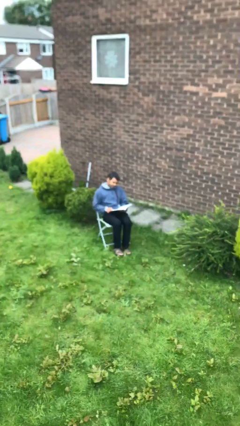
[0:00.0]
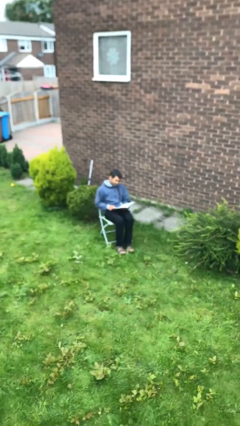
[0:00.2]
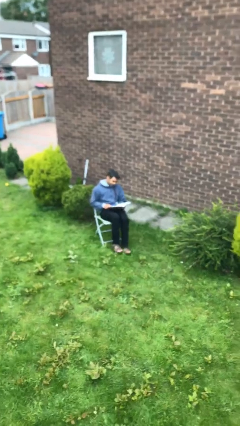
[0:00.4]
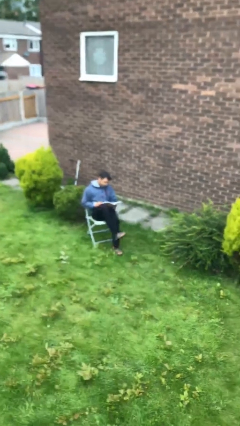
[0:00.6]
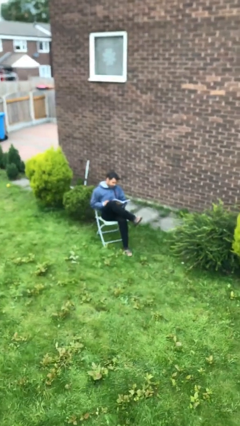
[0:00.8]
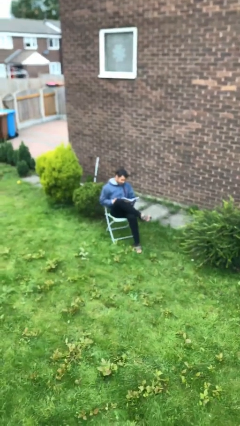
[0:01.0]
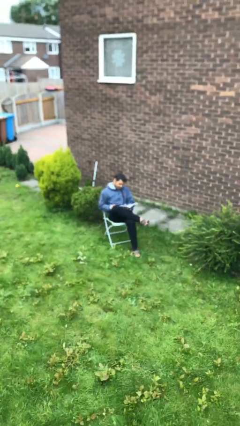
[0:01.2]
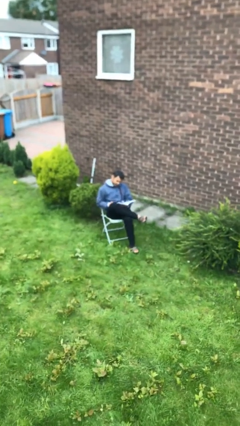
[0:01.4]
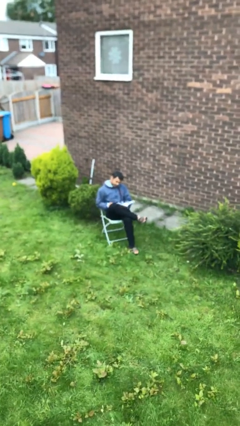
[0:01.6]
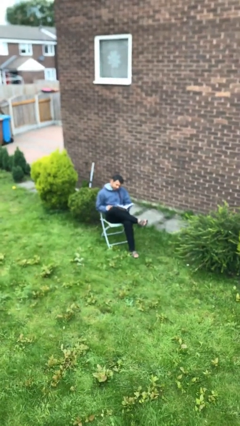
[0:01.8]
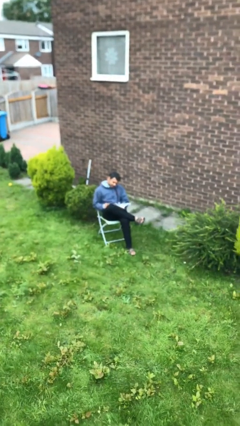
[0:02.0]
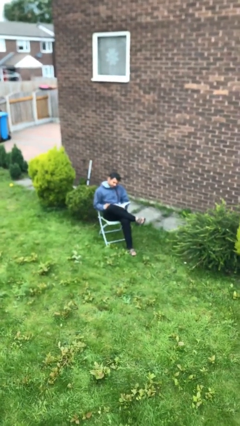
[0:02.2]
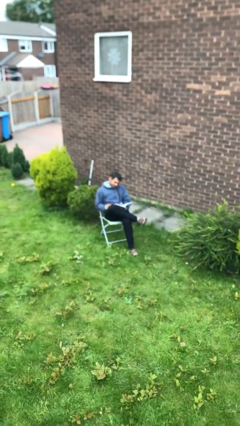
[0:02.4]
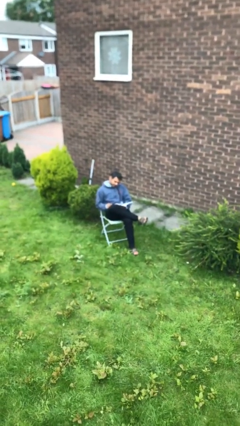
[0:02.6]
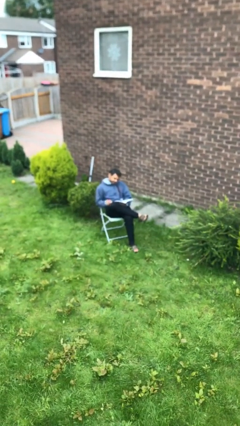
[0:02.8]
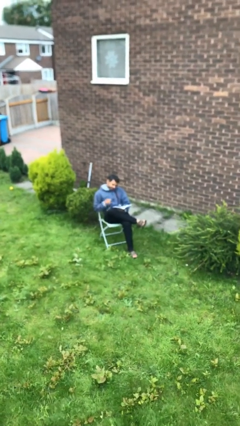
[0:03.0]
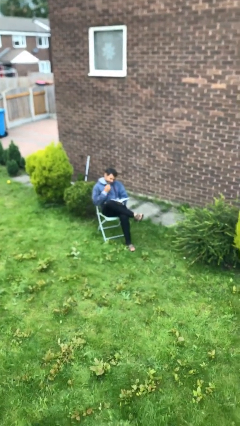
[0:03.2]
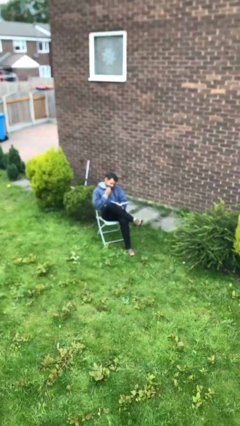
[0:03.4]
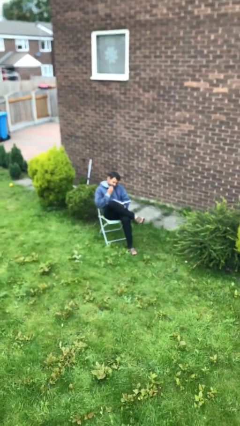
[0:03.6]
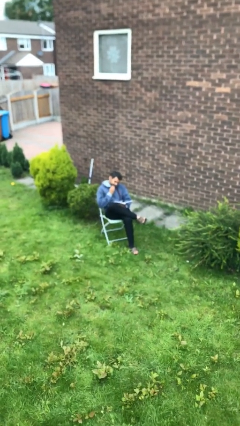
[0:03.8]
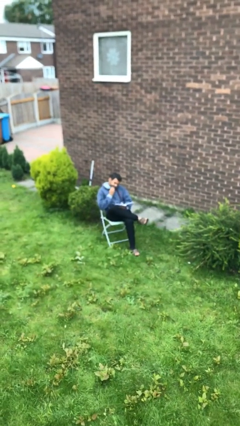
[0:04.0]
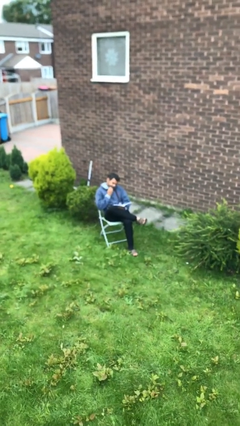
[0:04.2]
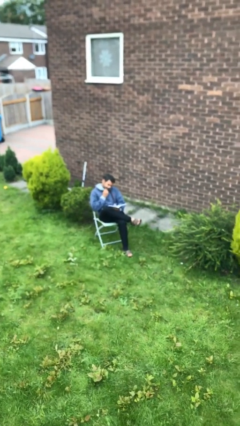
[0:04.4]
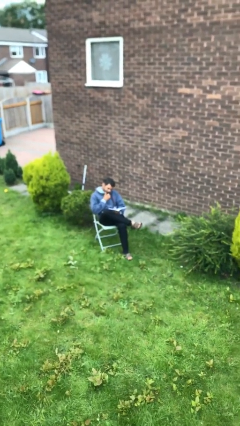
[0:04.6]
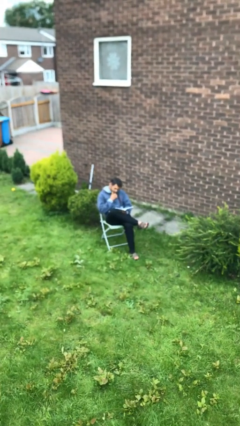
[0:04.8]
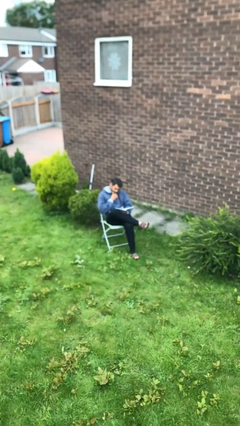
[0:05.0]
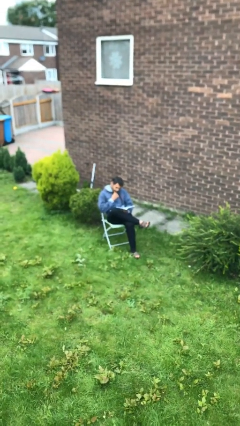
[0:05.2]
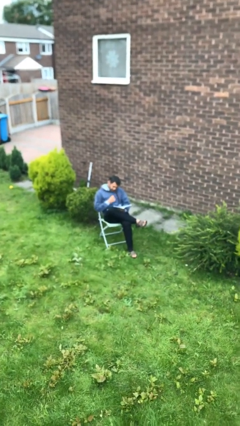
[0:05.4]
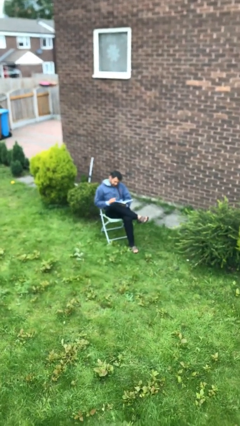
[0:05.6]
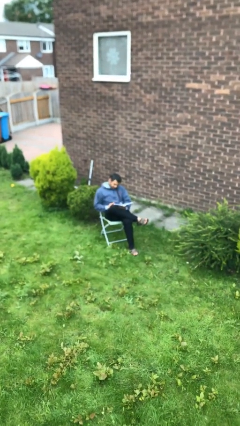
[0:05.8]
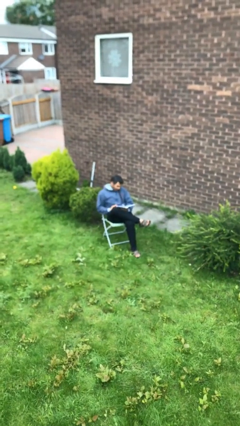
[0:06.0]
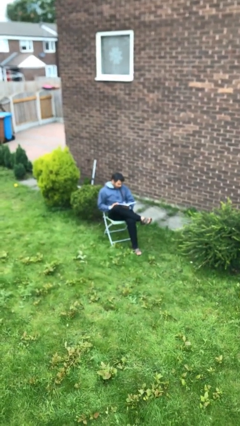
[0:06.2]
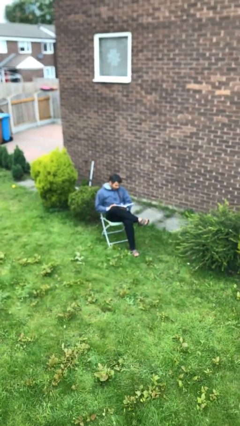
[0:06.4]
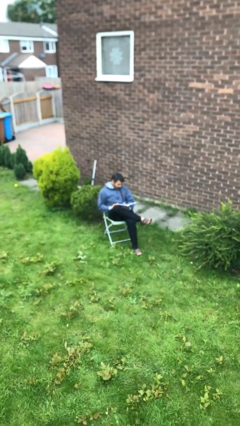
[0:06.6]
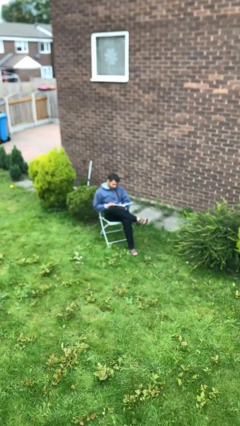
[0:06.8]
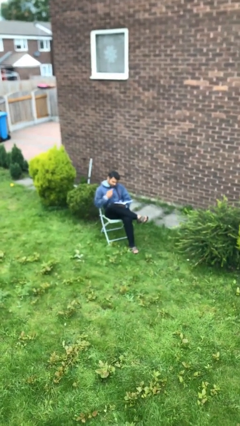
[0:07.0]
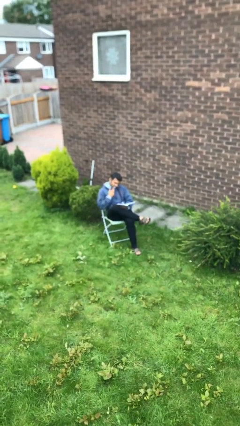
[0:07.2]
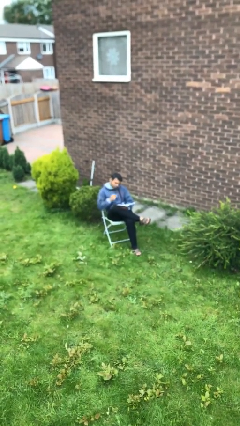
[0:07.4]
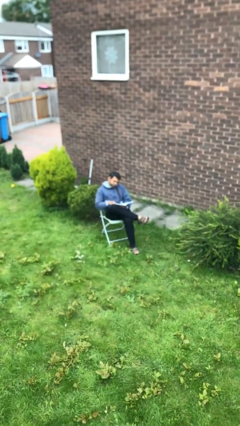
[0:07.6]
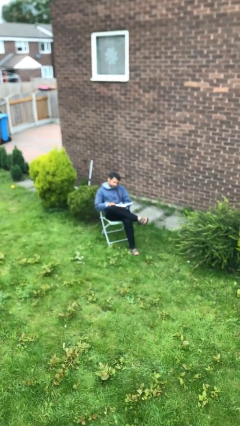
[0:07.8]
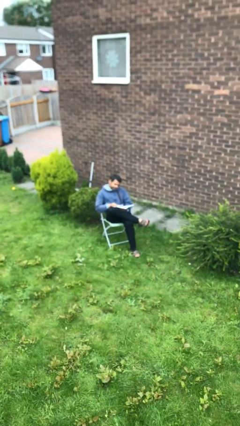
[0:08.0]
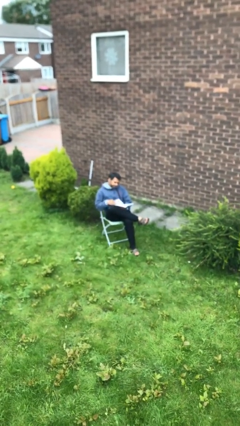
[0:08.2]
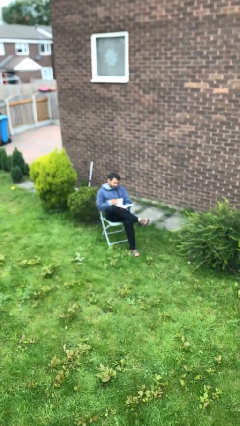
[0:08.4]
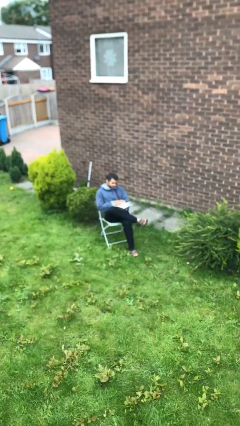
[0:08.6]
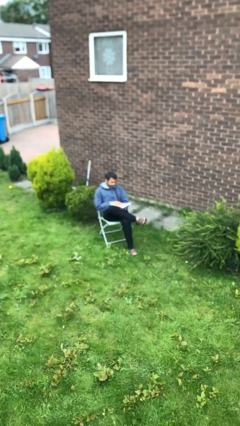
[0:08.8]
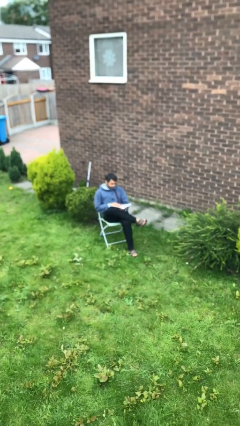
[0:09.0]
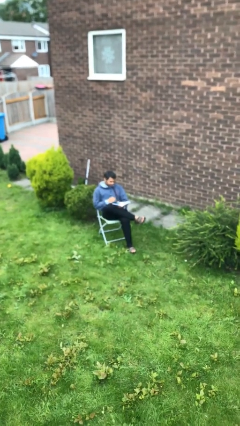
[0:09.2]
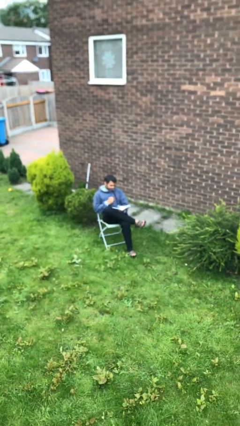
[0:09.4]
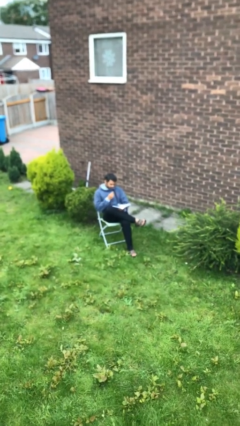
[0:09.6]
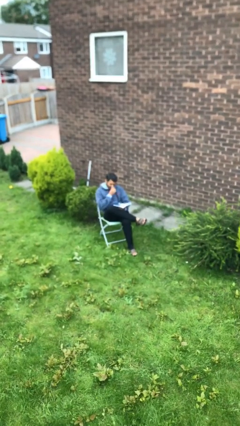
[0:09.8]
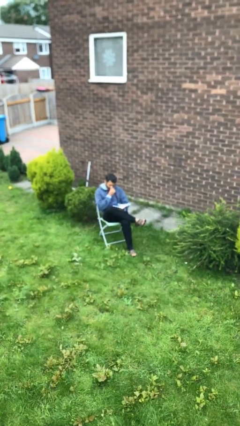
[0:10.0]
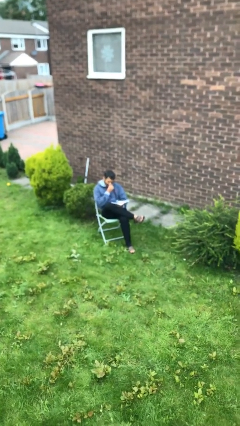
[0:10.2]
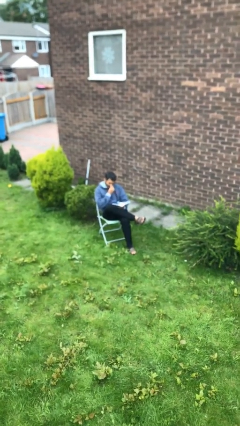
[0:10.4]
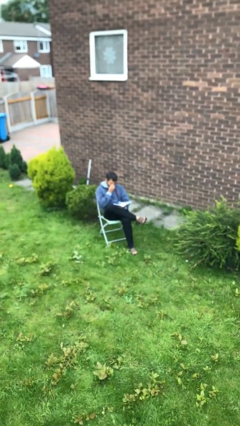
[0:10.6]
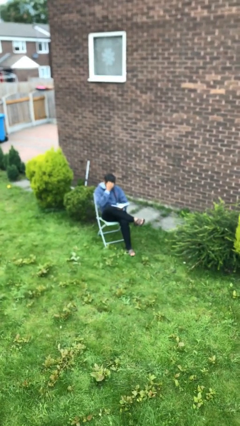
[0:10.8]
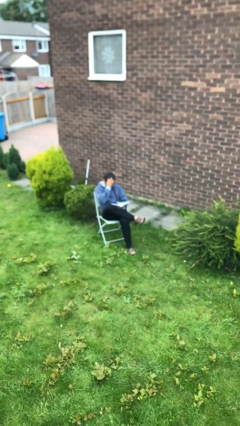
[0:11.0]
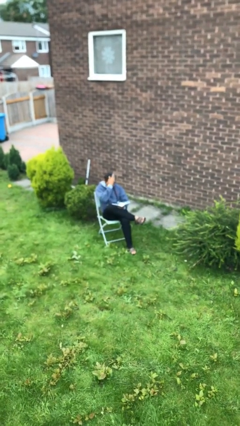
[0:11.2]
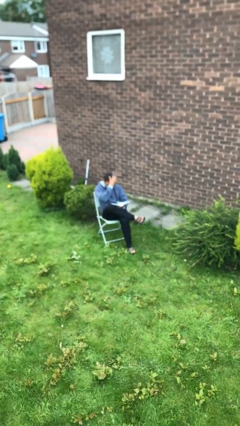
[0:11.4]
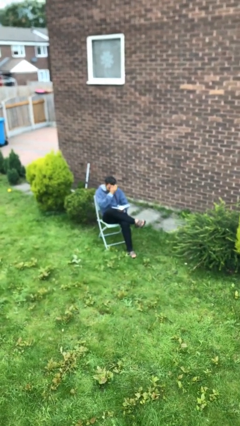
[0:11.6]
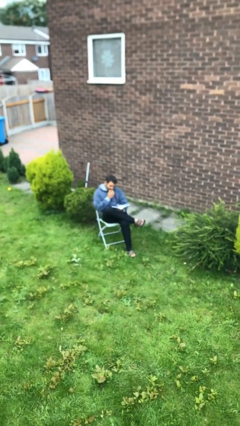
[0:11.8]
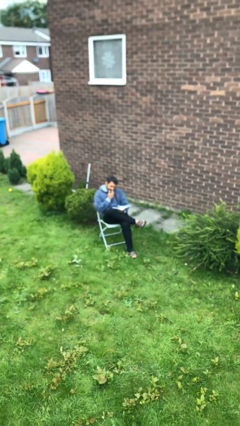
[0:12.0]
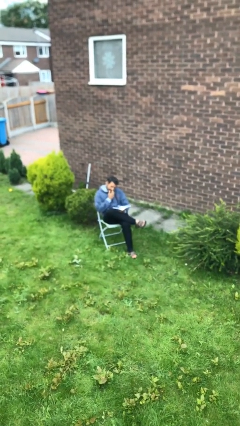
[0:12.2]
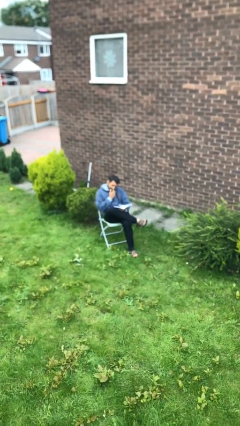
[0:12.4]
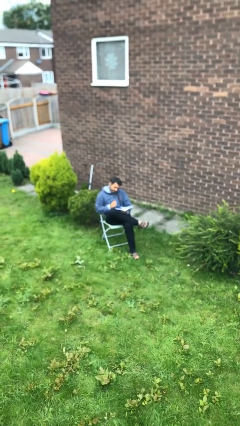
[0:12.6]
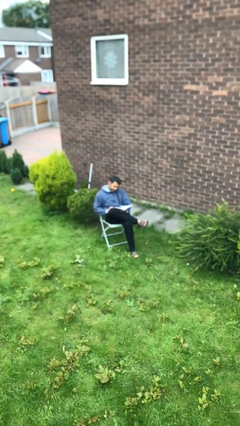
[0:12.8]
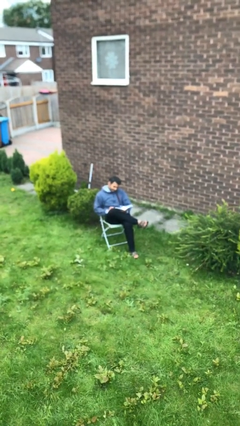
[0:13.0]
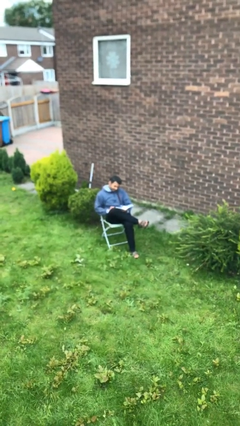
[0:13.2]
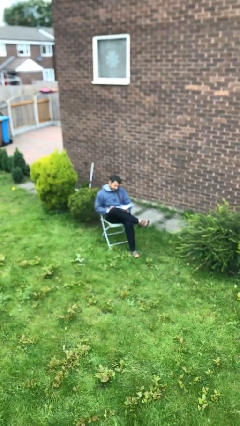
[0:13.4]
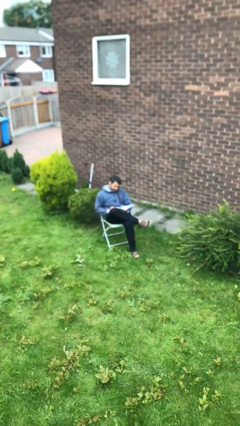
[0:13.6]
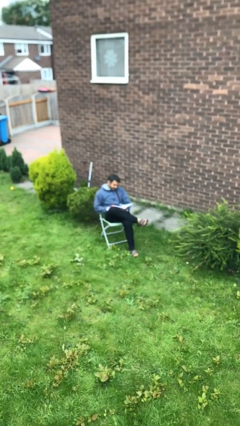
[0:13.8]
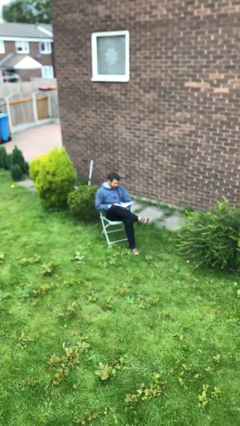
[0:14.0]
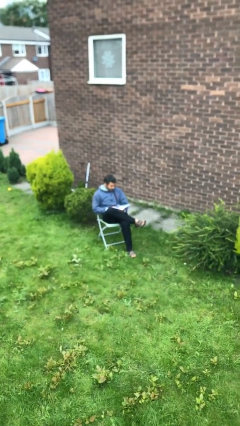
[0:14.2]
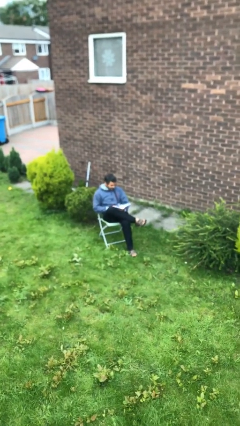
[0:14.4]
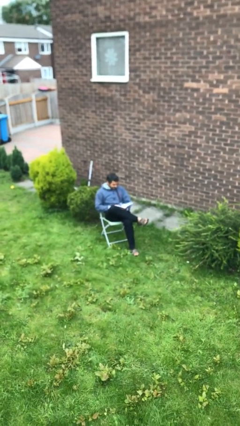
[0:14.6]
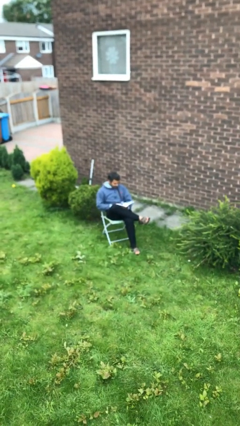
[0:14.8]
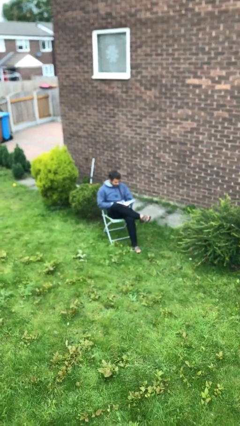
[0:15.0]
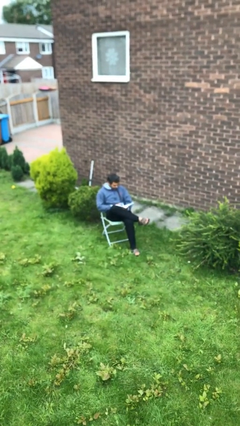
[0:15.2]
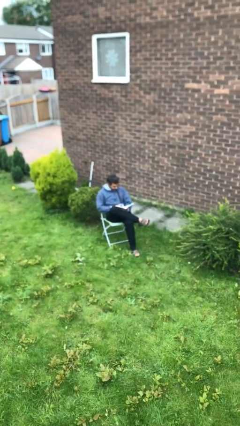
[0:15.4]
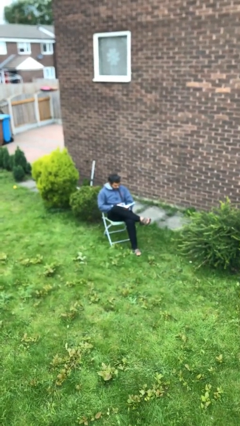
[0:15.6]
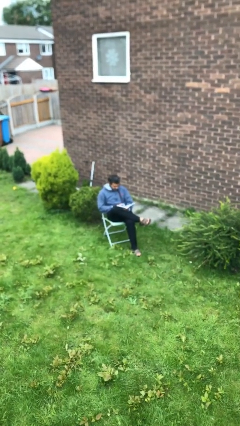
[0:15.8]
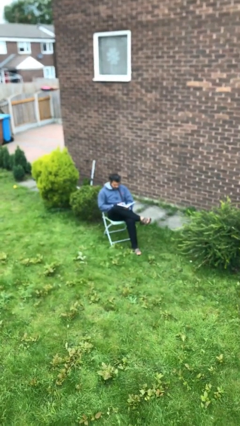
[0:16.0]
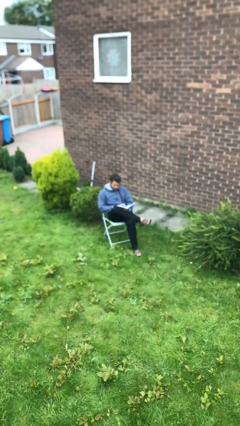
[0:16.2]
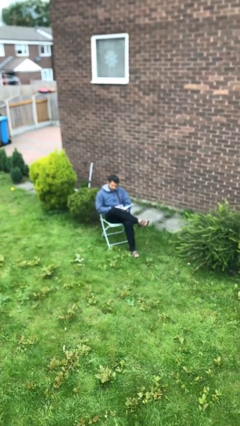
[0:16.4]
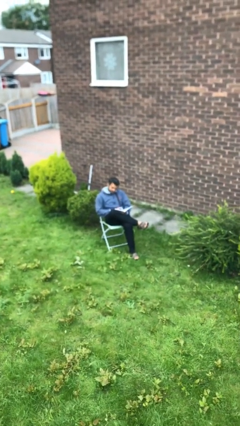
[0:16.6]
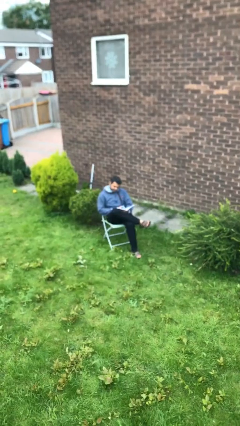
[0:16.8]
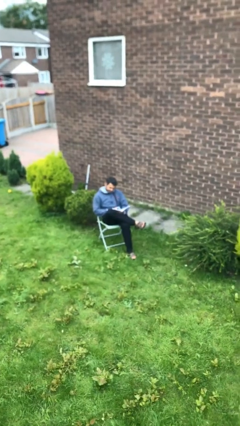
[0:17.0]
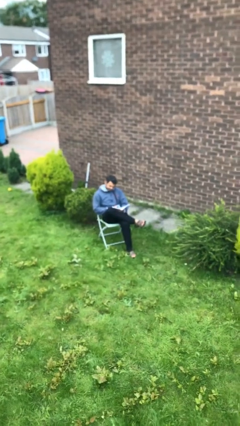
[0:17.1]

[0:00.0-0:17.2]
person reads document

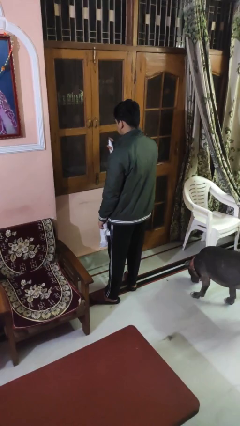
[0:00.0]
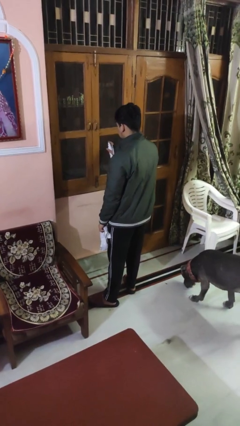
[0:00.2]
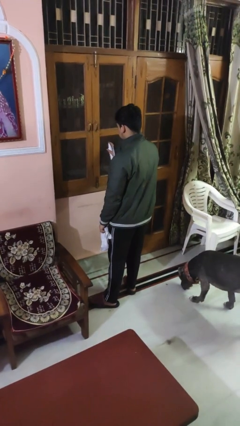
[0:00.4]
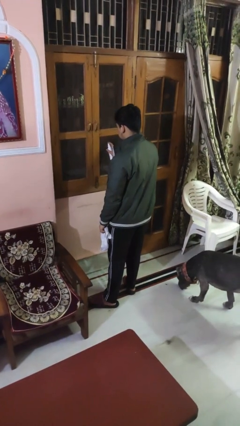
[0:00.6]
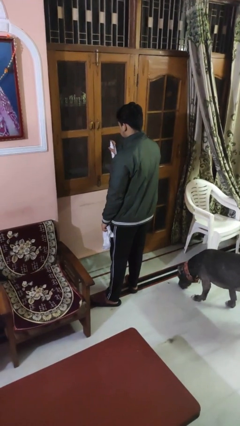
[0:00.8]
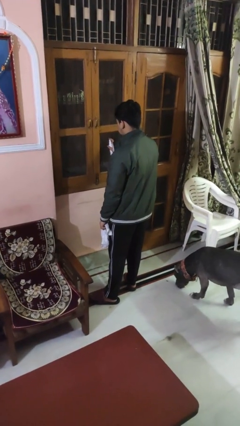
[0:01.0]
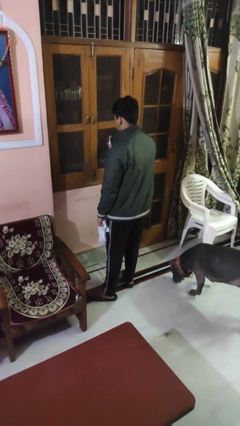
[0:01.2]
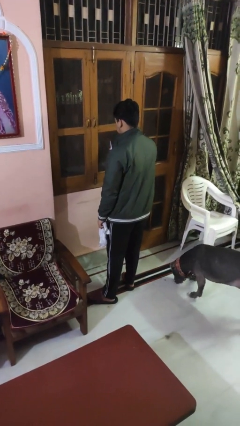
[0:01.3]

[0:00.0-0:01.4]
person sprays from bottle
